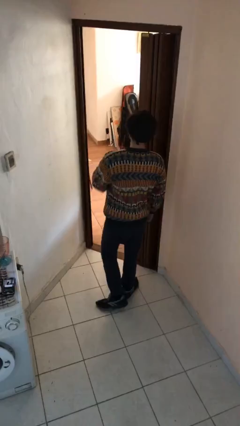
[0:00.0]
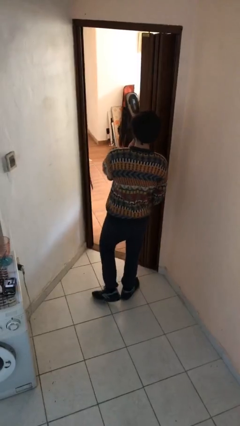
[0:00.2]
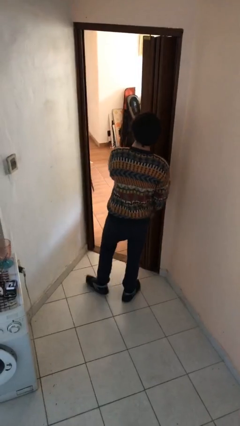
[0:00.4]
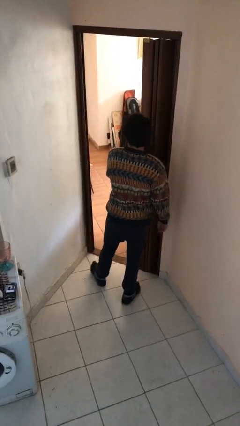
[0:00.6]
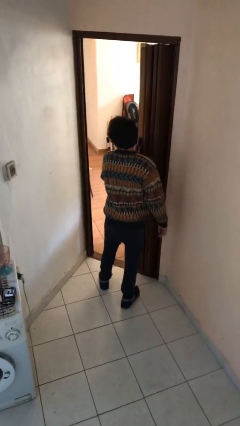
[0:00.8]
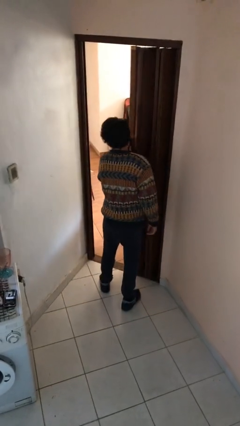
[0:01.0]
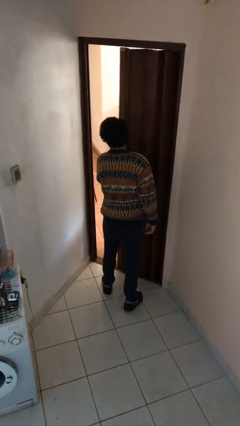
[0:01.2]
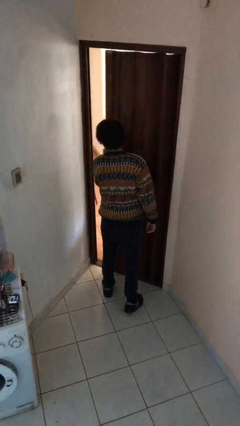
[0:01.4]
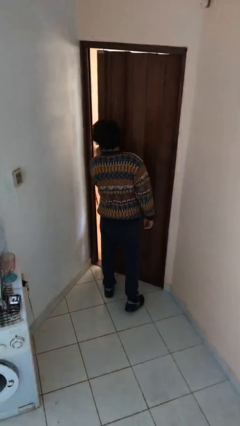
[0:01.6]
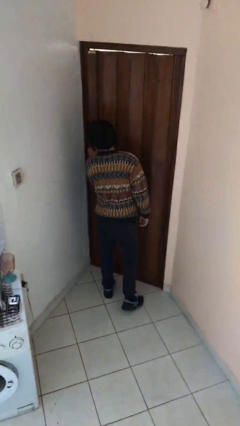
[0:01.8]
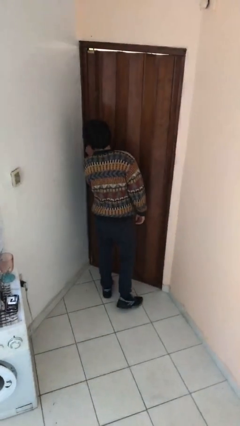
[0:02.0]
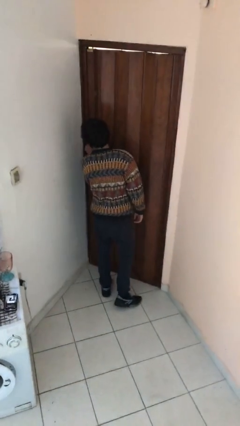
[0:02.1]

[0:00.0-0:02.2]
person closes sliding door

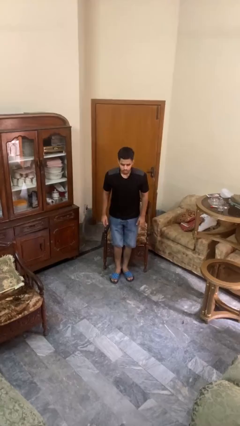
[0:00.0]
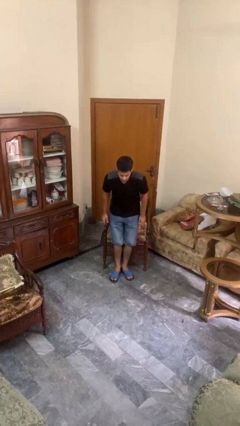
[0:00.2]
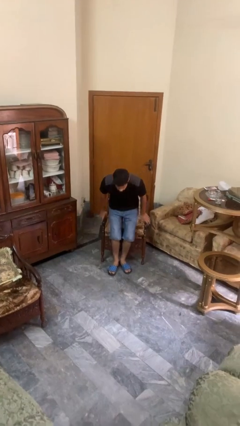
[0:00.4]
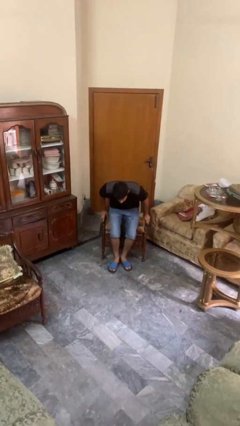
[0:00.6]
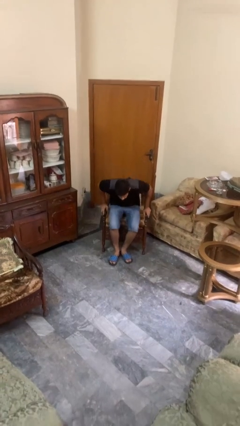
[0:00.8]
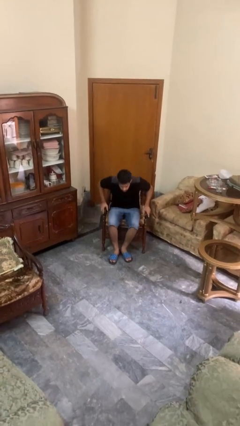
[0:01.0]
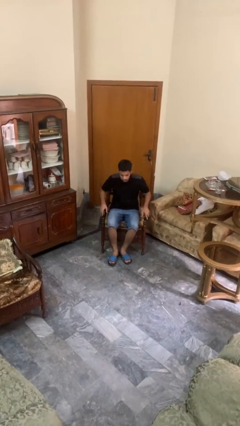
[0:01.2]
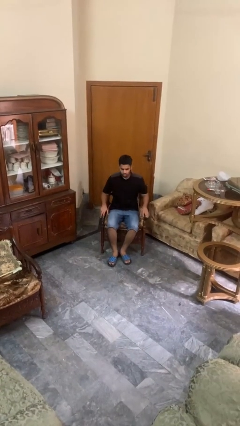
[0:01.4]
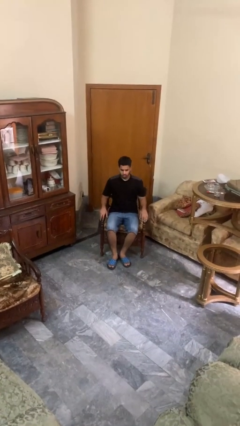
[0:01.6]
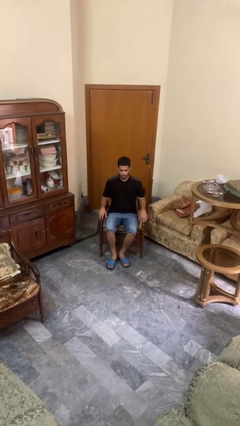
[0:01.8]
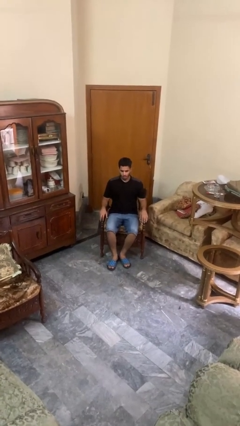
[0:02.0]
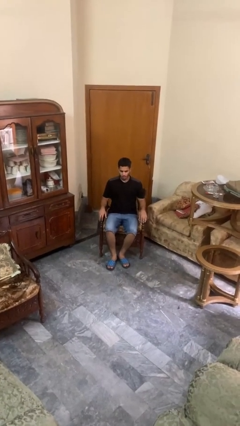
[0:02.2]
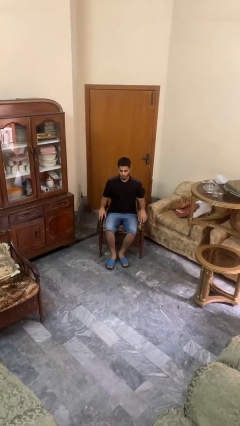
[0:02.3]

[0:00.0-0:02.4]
person sits down

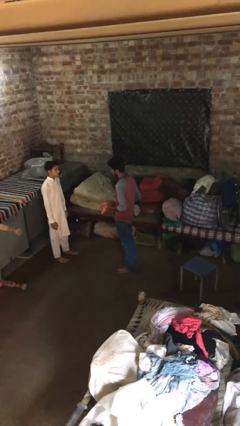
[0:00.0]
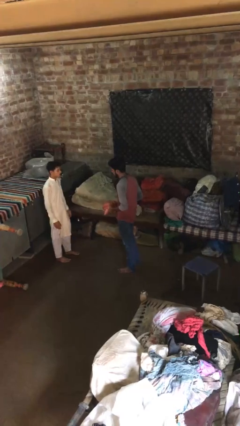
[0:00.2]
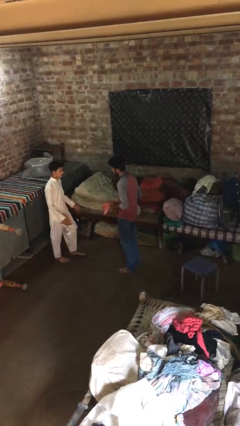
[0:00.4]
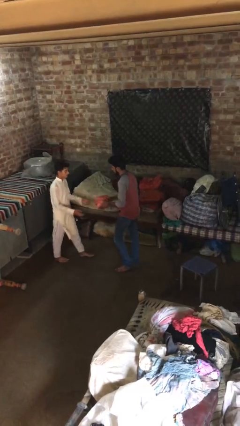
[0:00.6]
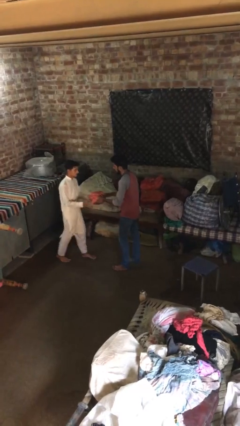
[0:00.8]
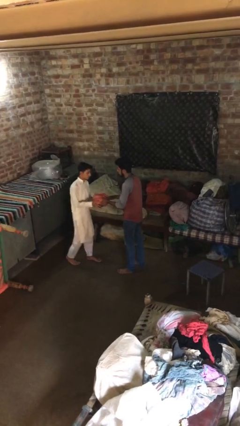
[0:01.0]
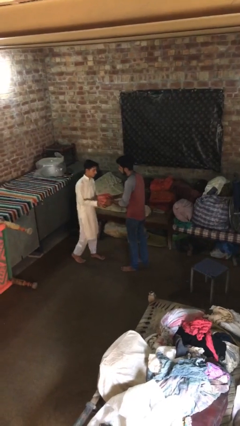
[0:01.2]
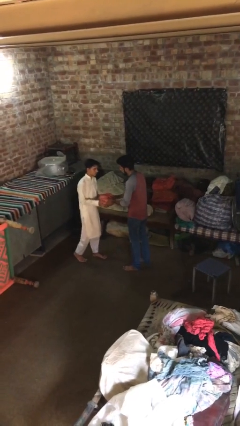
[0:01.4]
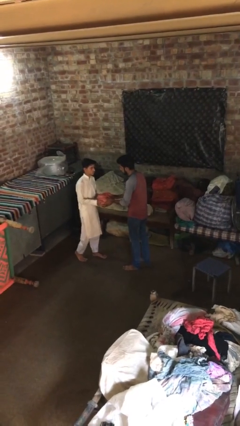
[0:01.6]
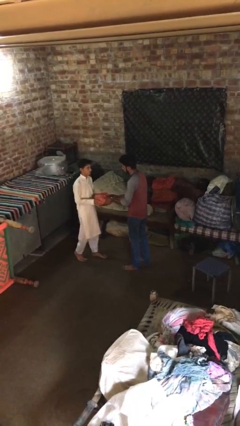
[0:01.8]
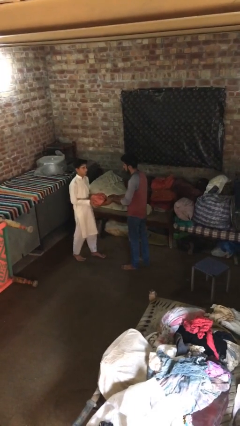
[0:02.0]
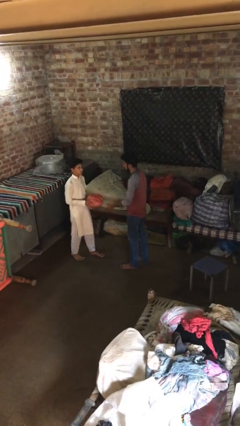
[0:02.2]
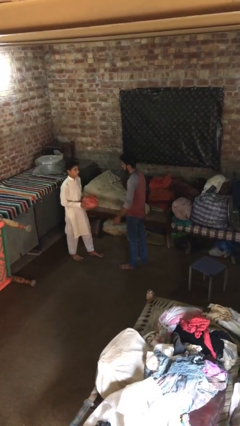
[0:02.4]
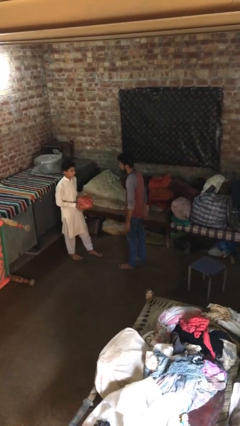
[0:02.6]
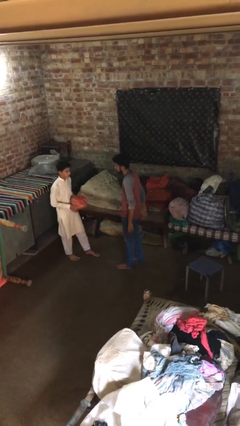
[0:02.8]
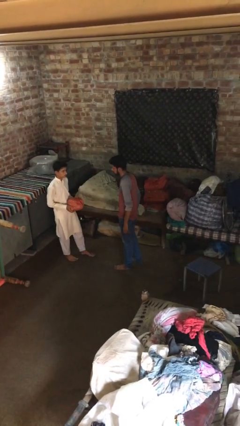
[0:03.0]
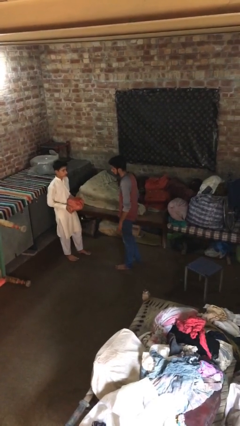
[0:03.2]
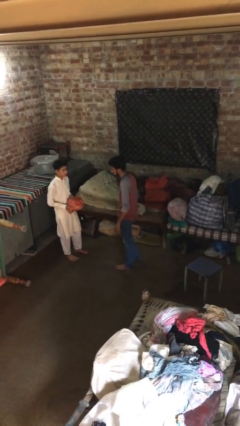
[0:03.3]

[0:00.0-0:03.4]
person transfers object to person

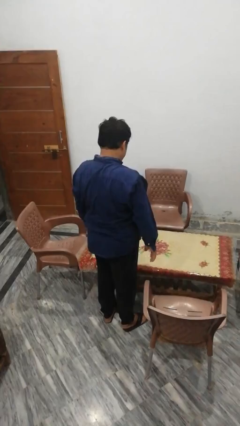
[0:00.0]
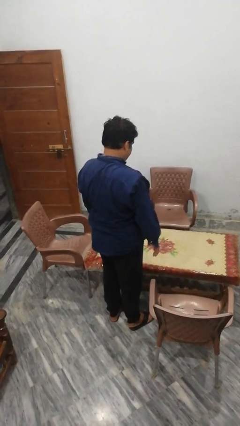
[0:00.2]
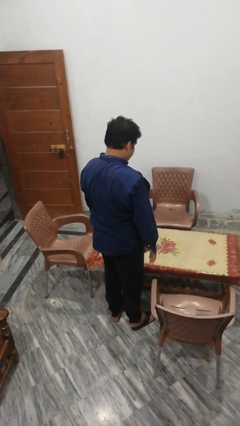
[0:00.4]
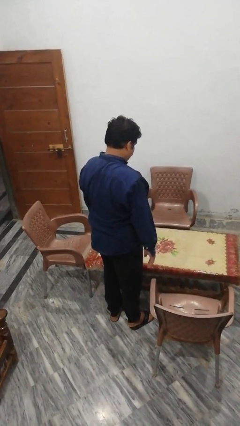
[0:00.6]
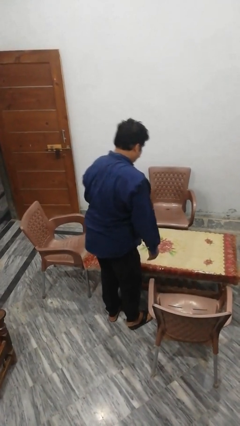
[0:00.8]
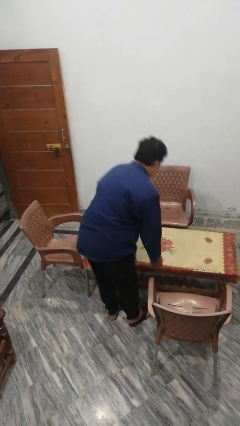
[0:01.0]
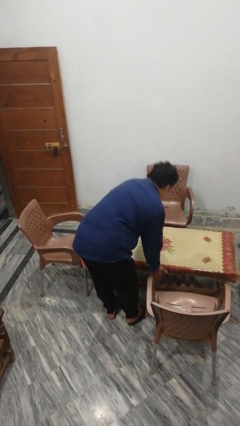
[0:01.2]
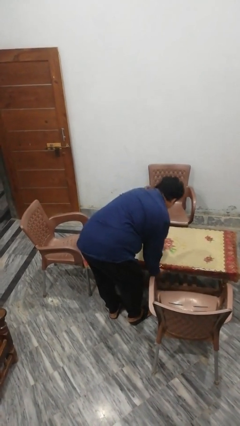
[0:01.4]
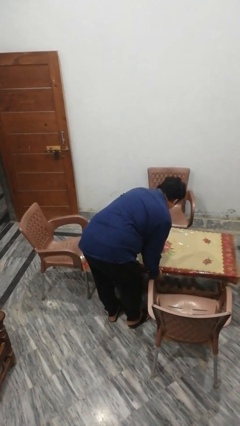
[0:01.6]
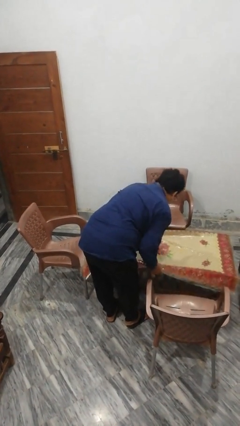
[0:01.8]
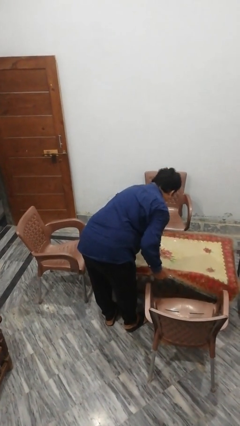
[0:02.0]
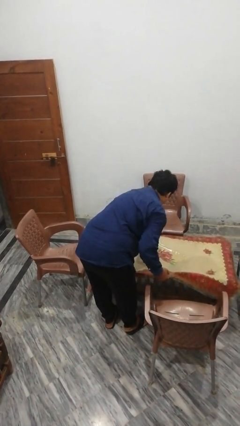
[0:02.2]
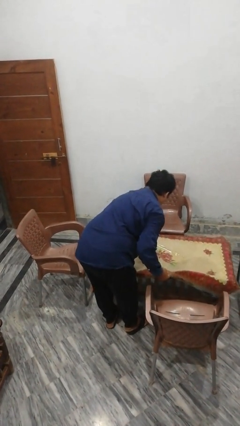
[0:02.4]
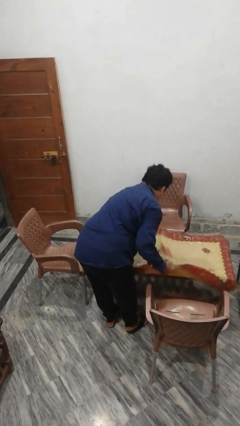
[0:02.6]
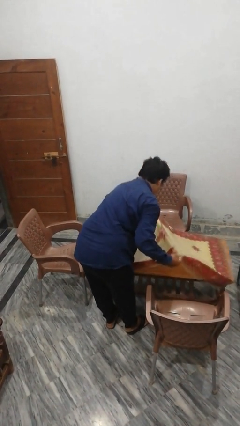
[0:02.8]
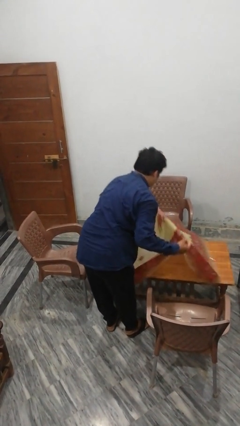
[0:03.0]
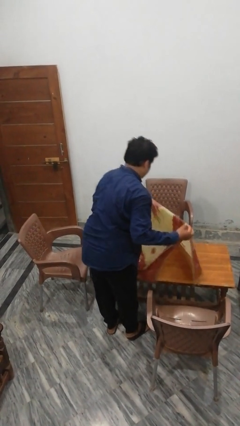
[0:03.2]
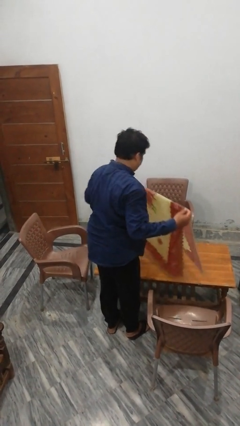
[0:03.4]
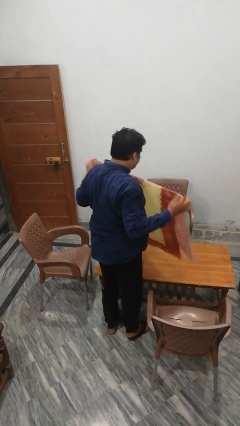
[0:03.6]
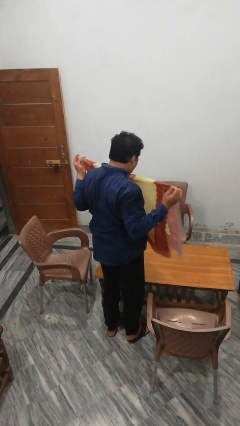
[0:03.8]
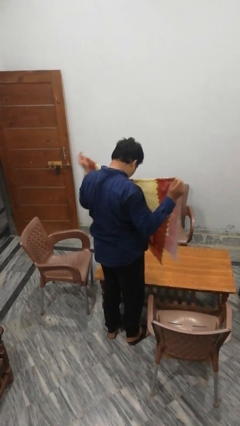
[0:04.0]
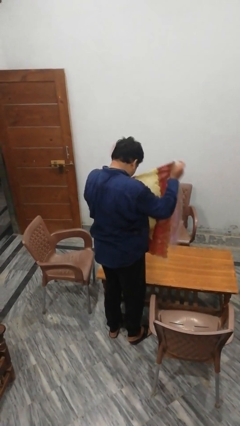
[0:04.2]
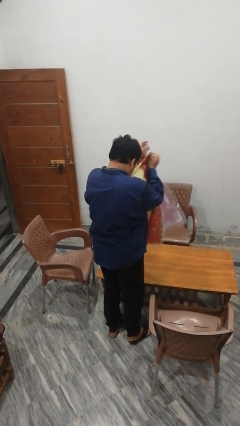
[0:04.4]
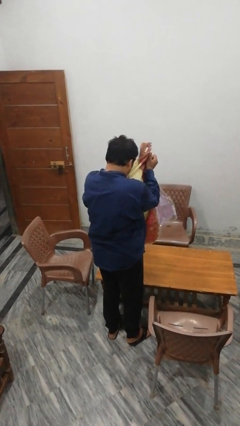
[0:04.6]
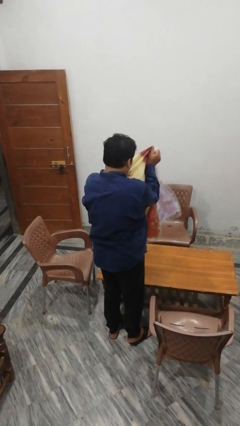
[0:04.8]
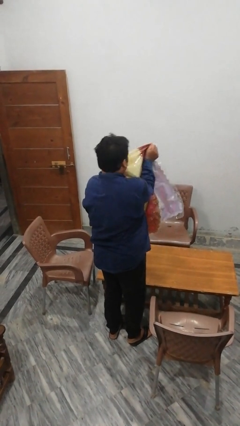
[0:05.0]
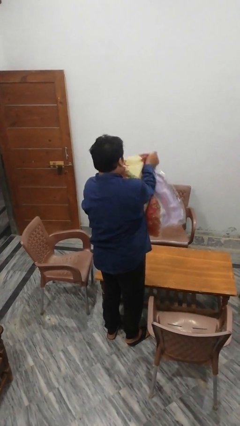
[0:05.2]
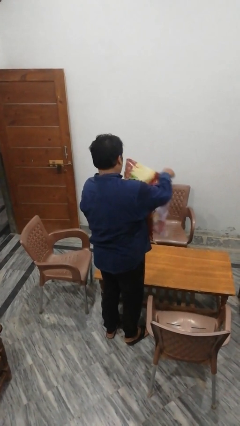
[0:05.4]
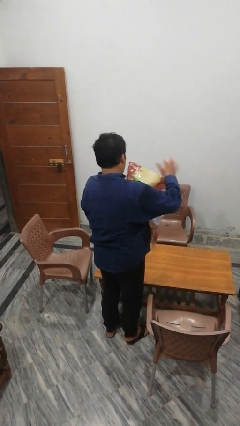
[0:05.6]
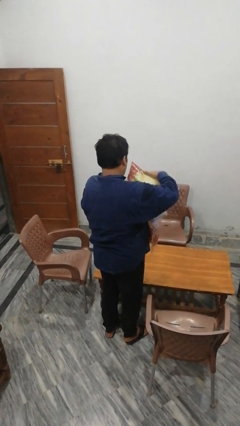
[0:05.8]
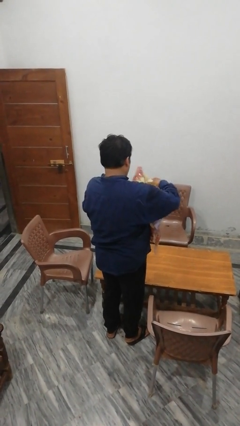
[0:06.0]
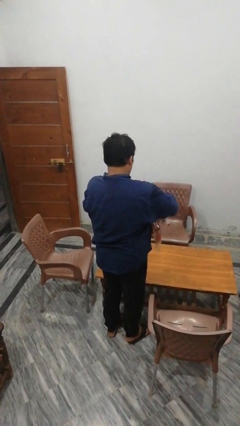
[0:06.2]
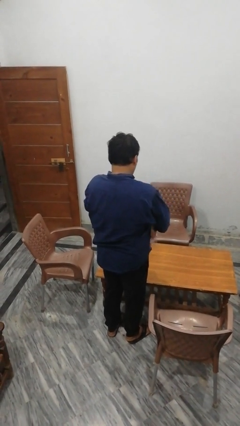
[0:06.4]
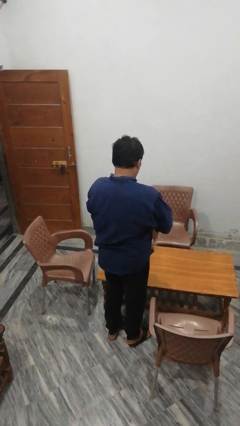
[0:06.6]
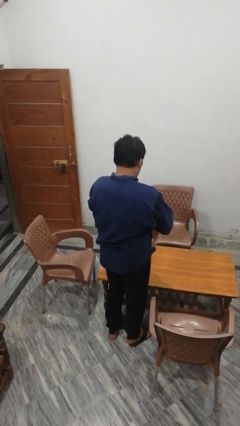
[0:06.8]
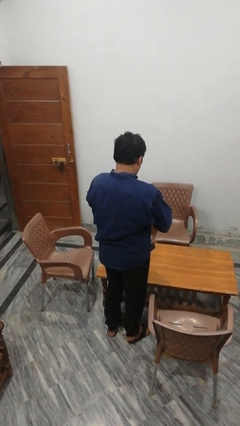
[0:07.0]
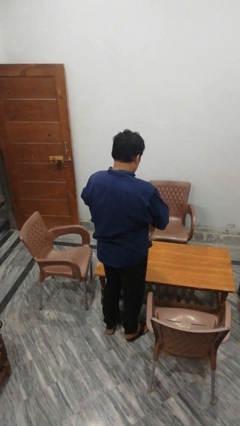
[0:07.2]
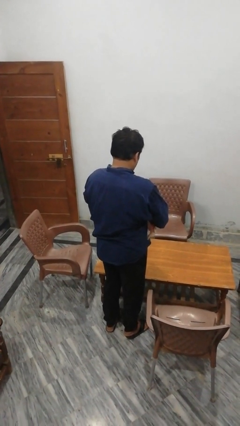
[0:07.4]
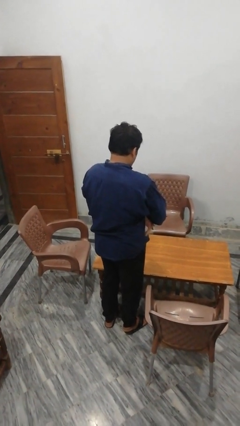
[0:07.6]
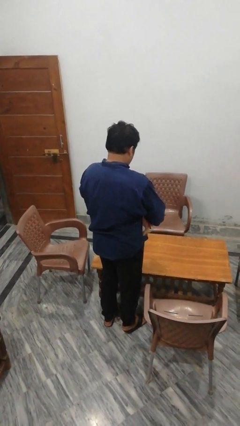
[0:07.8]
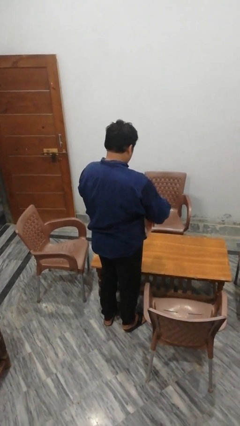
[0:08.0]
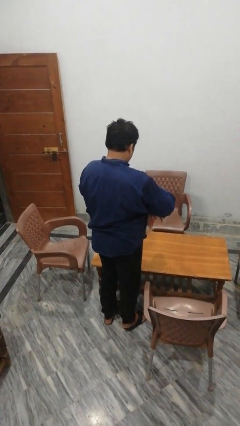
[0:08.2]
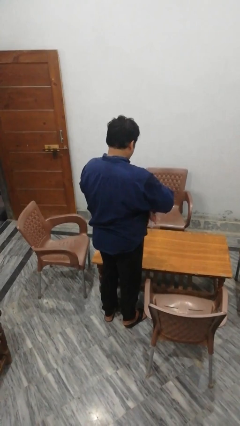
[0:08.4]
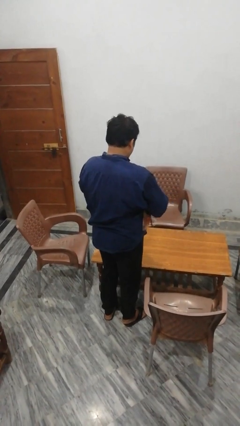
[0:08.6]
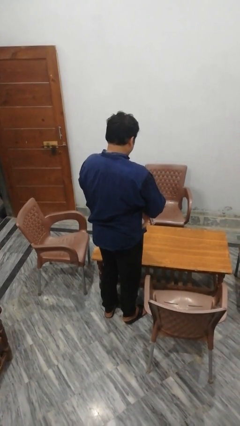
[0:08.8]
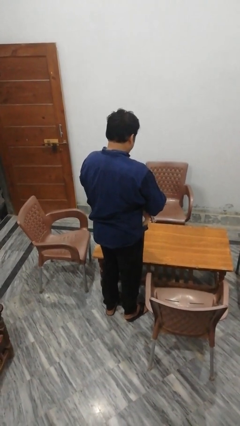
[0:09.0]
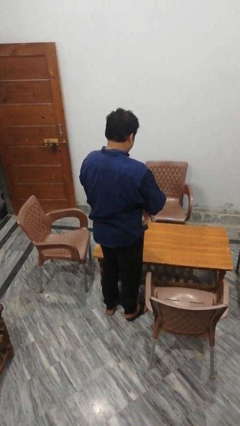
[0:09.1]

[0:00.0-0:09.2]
person folds tablecloth

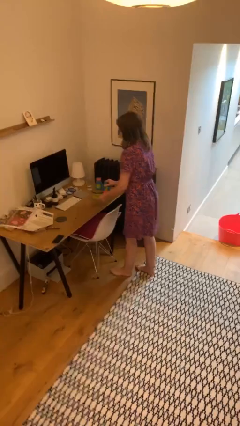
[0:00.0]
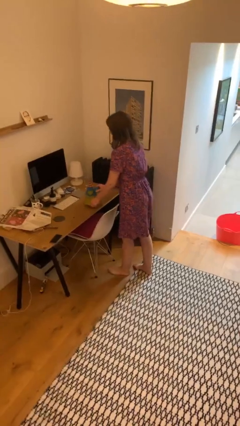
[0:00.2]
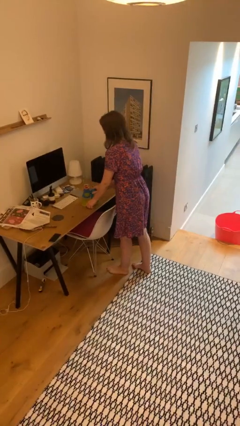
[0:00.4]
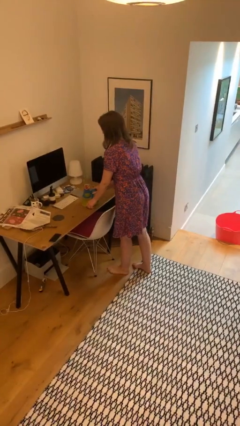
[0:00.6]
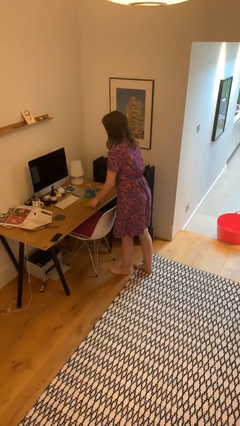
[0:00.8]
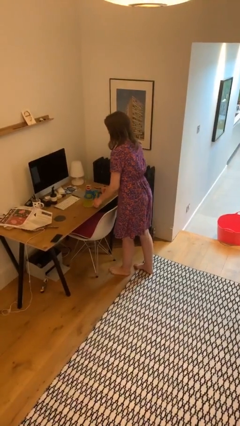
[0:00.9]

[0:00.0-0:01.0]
person puts down object on table
